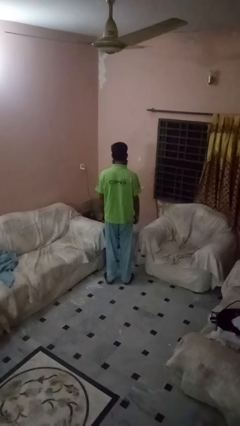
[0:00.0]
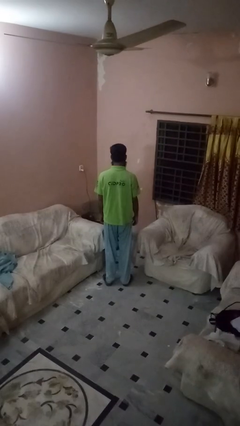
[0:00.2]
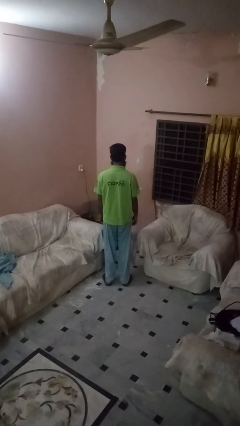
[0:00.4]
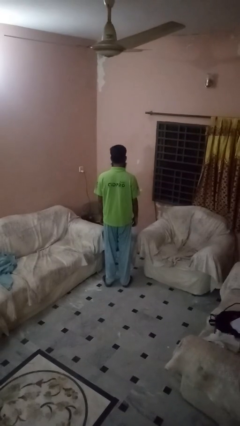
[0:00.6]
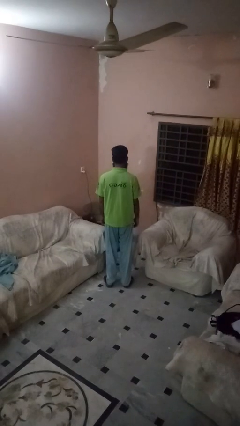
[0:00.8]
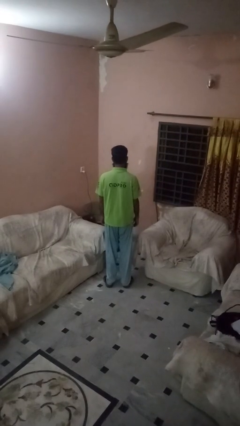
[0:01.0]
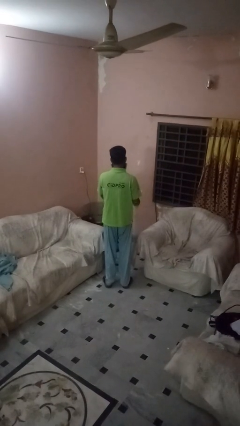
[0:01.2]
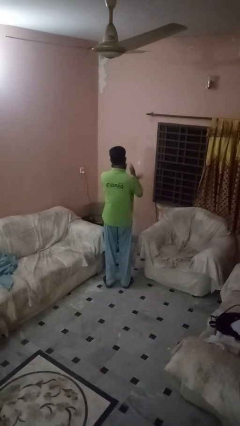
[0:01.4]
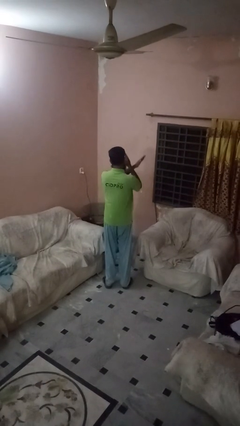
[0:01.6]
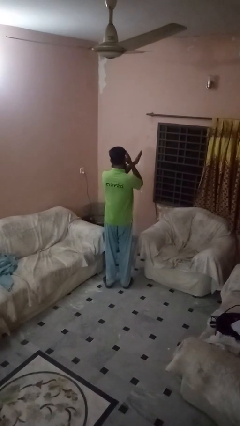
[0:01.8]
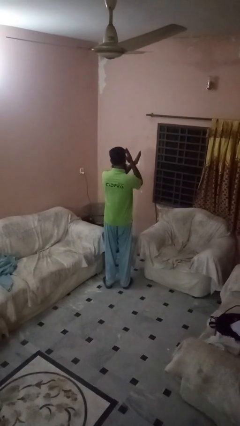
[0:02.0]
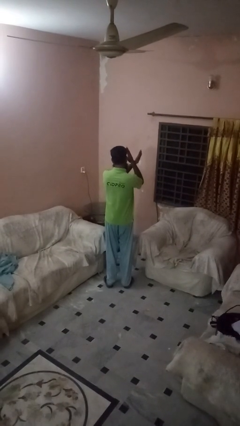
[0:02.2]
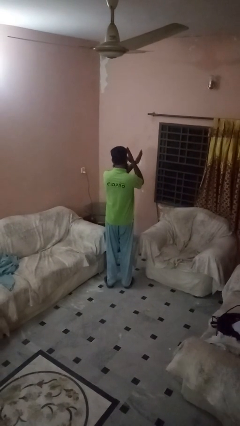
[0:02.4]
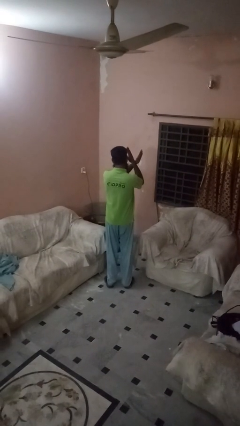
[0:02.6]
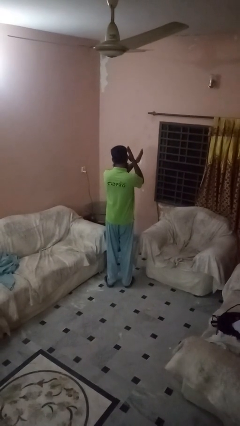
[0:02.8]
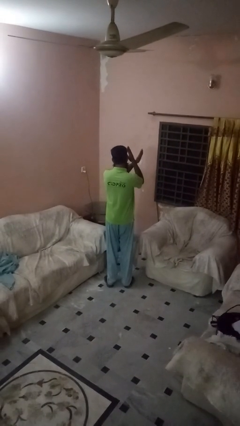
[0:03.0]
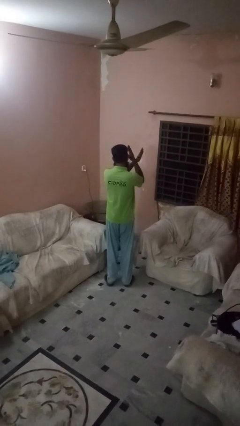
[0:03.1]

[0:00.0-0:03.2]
person gestures arms x

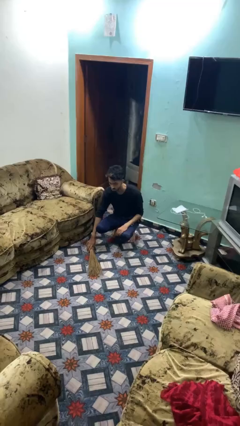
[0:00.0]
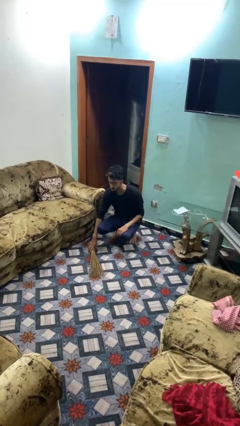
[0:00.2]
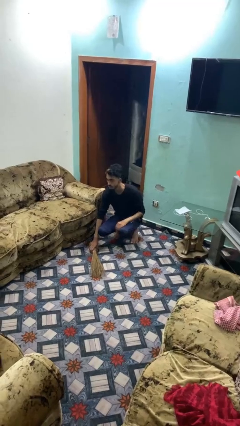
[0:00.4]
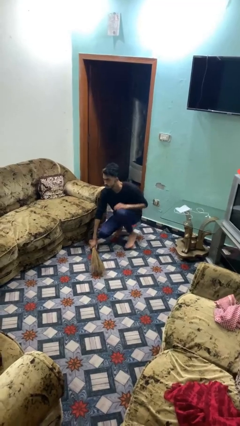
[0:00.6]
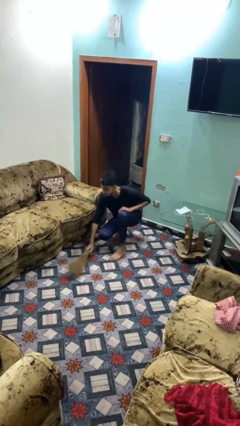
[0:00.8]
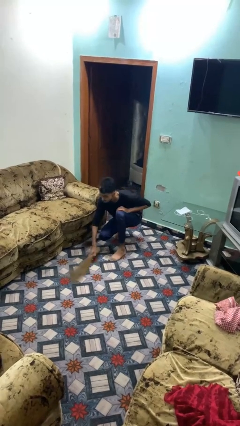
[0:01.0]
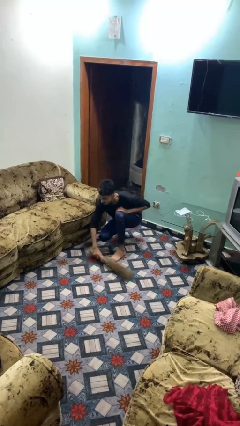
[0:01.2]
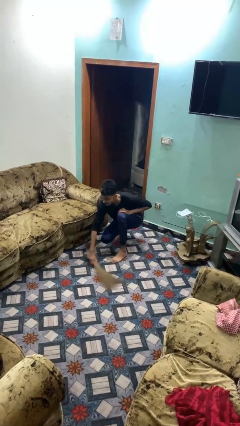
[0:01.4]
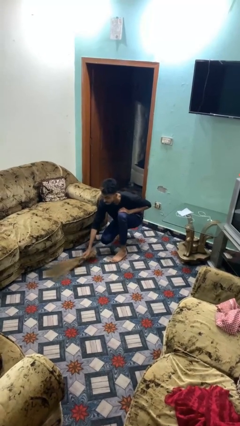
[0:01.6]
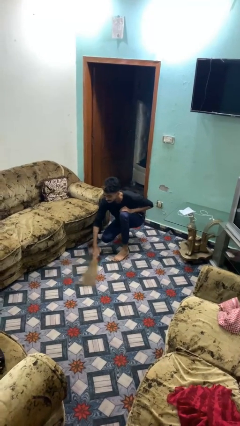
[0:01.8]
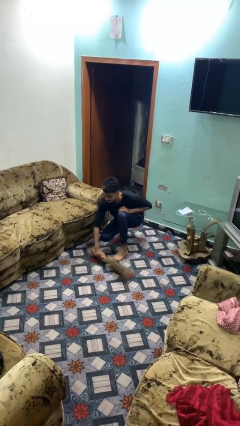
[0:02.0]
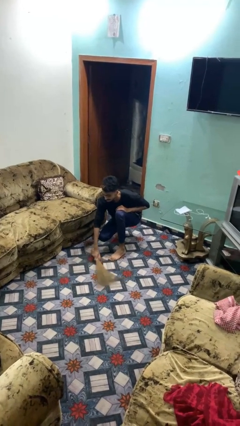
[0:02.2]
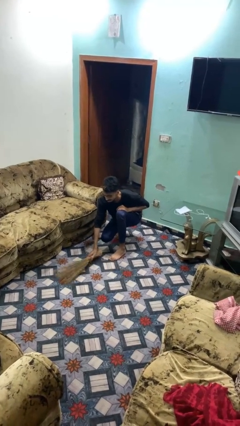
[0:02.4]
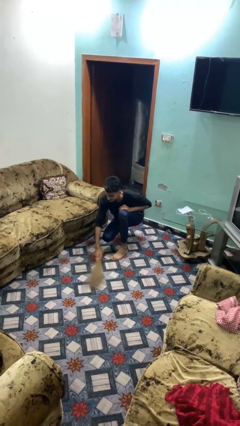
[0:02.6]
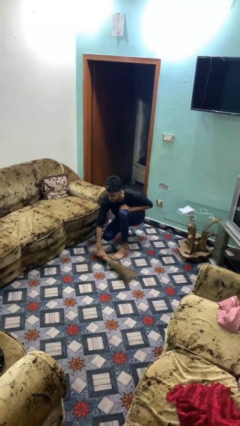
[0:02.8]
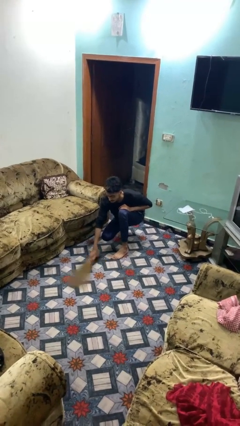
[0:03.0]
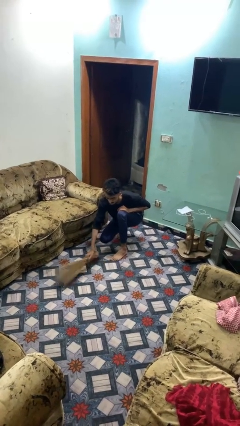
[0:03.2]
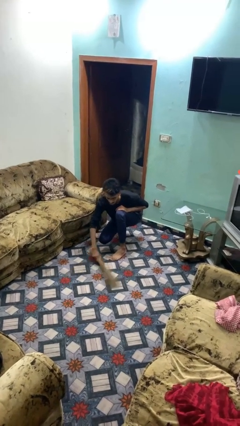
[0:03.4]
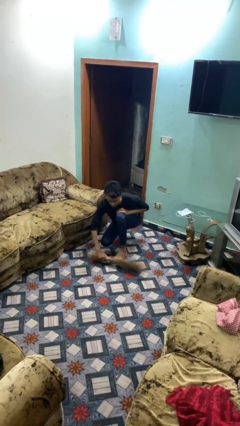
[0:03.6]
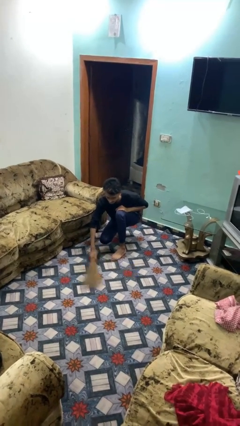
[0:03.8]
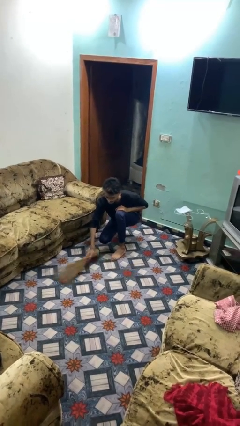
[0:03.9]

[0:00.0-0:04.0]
person sweeps floor

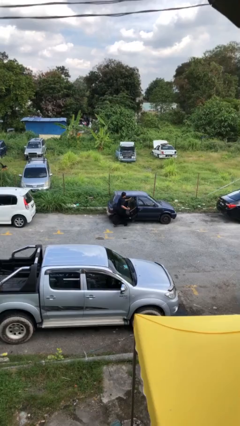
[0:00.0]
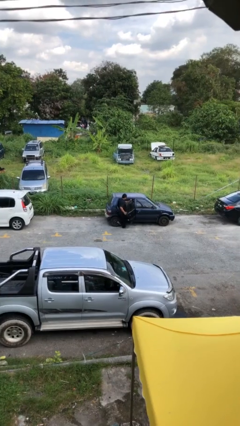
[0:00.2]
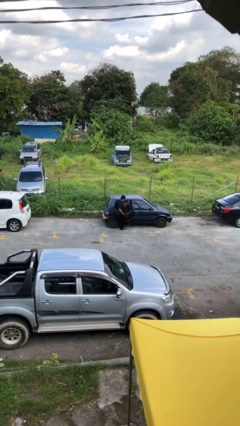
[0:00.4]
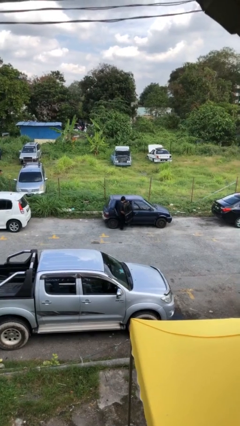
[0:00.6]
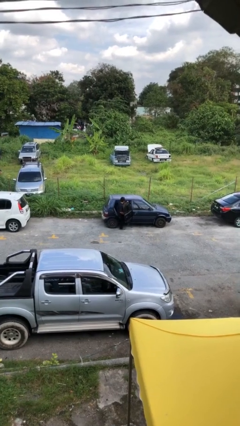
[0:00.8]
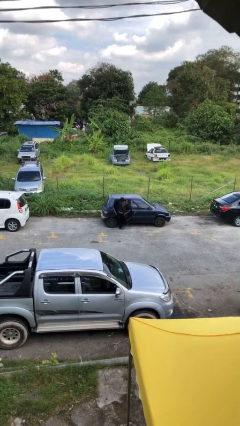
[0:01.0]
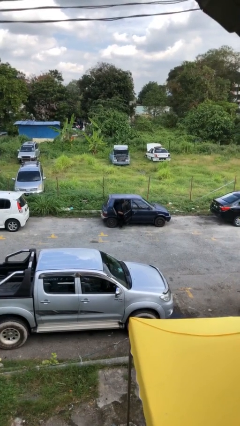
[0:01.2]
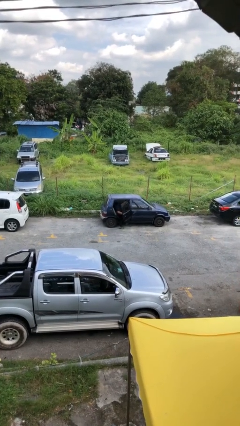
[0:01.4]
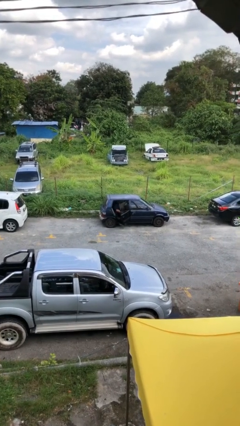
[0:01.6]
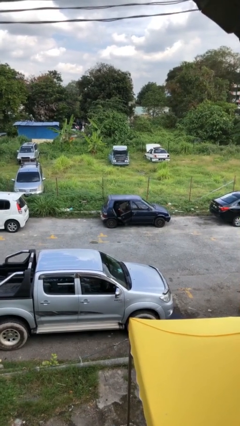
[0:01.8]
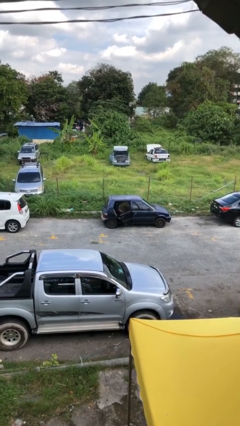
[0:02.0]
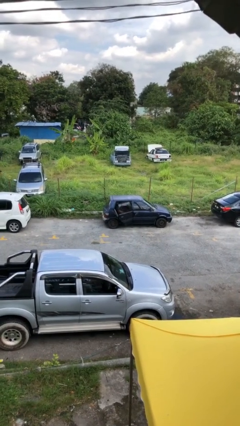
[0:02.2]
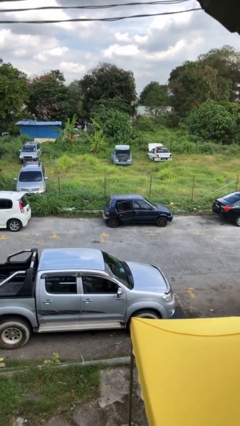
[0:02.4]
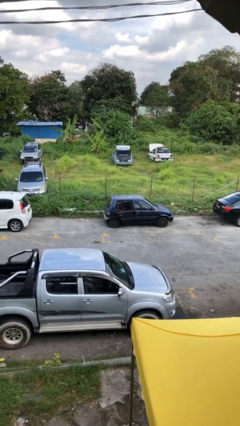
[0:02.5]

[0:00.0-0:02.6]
person enters car

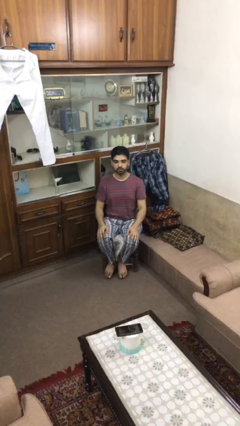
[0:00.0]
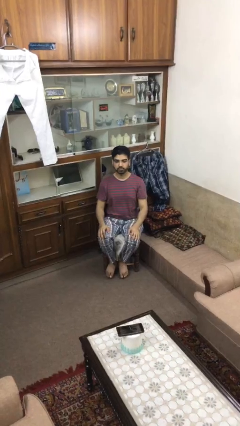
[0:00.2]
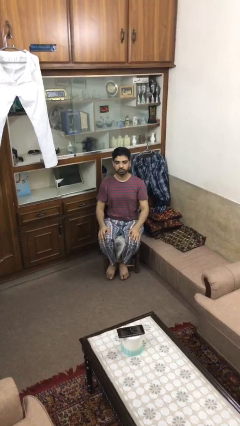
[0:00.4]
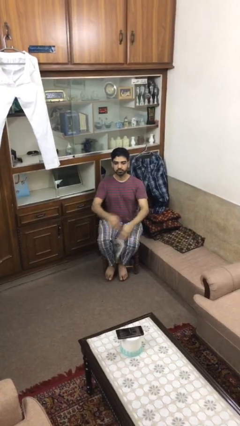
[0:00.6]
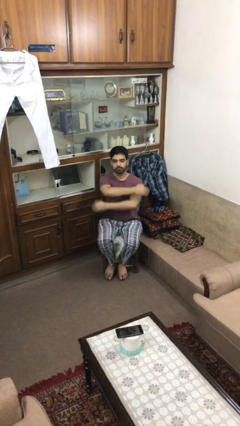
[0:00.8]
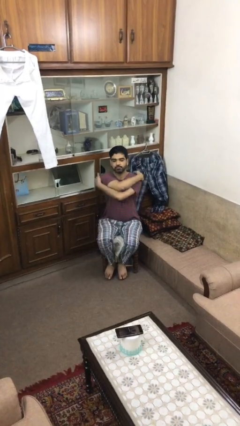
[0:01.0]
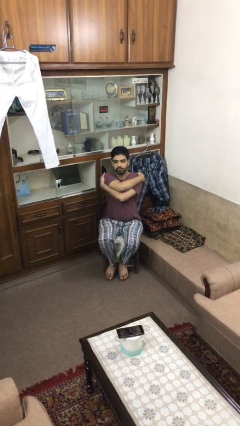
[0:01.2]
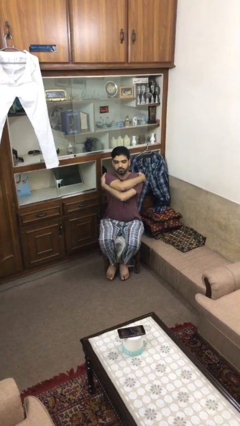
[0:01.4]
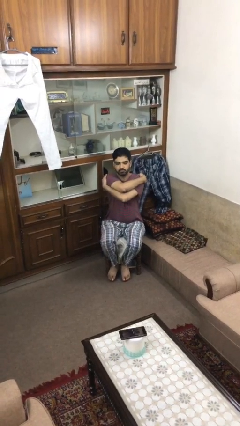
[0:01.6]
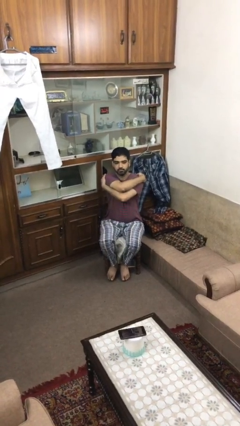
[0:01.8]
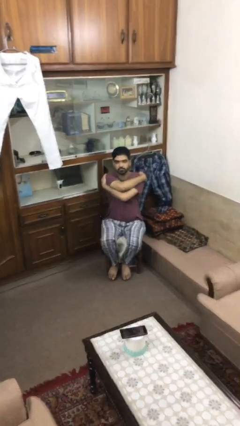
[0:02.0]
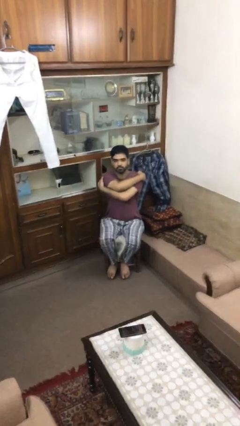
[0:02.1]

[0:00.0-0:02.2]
person crosses arms

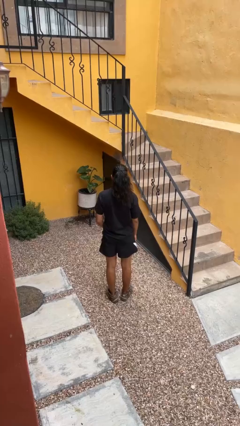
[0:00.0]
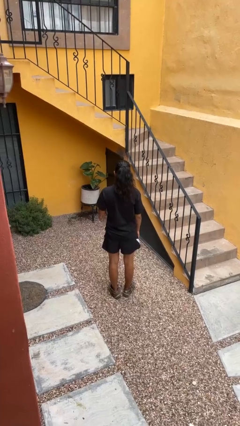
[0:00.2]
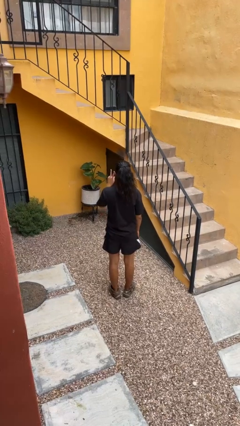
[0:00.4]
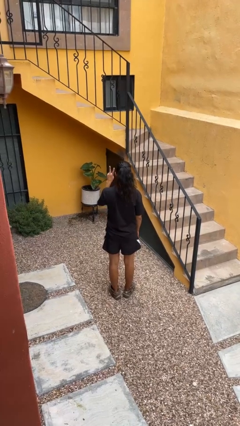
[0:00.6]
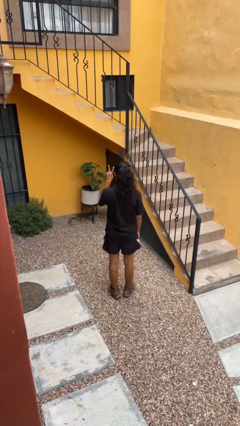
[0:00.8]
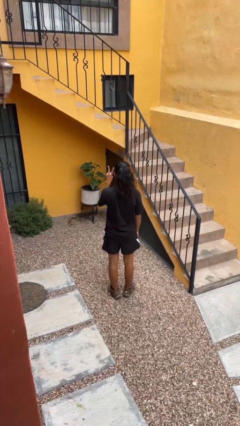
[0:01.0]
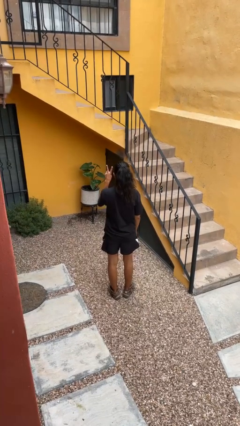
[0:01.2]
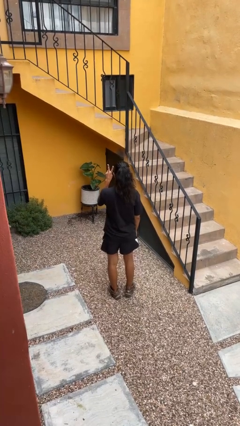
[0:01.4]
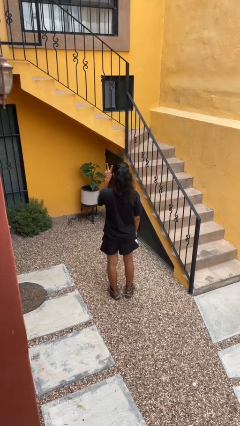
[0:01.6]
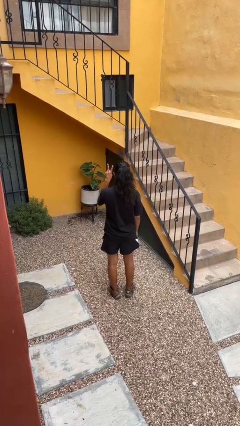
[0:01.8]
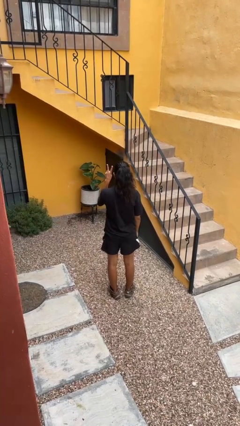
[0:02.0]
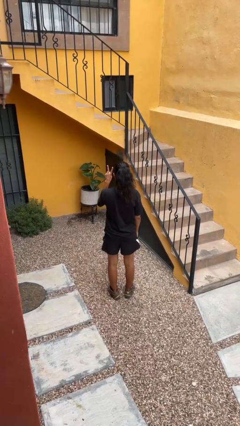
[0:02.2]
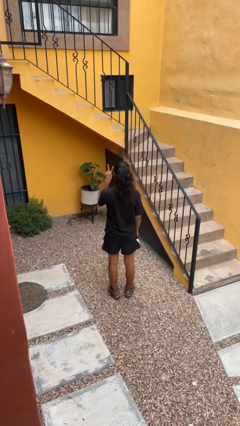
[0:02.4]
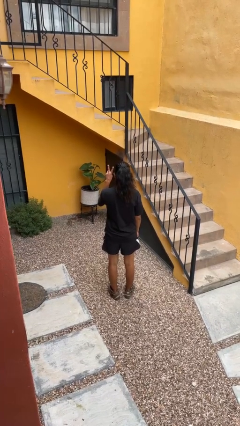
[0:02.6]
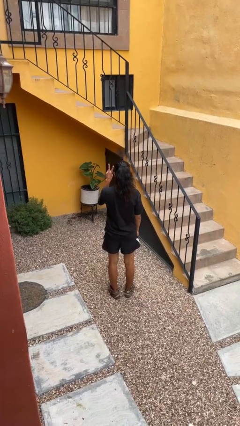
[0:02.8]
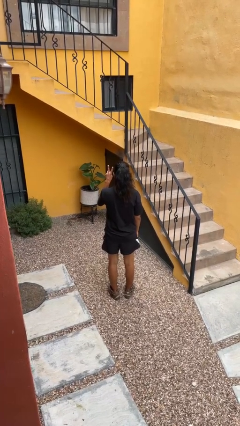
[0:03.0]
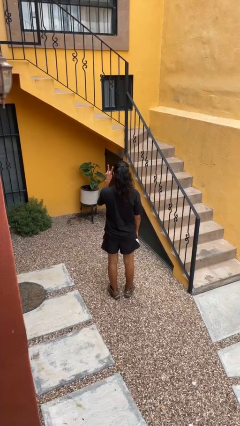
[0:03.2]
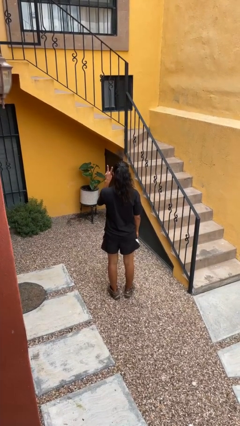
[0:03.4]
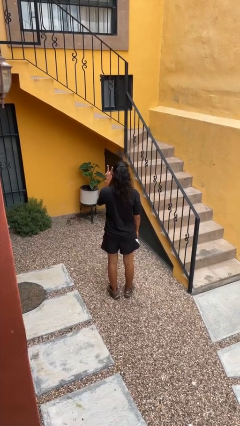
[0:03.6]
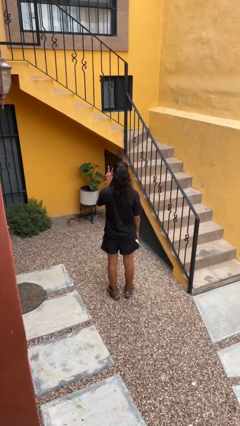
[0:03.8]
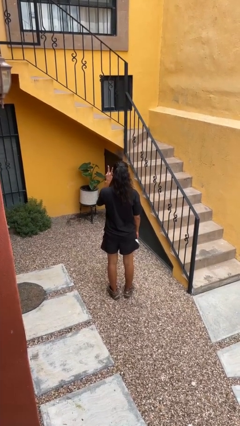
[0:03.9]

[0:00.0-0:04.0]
person gestures peace

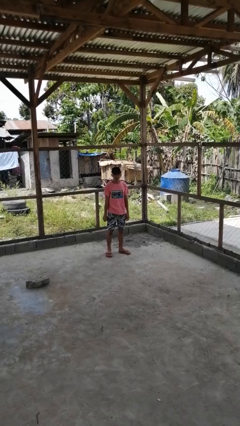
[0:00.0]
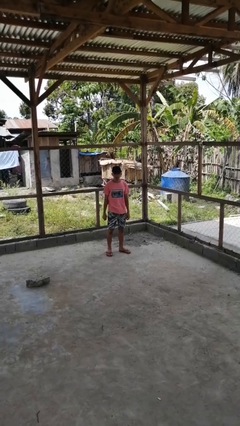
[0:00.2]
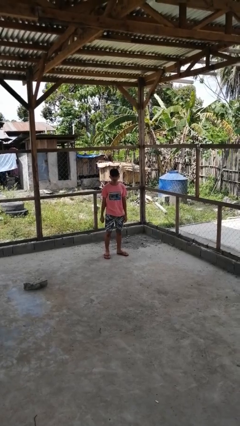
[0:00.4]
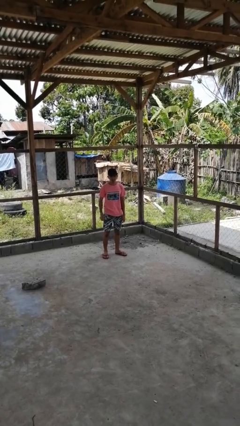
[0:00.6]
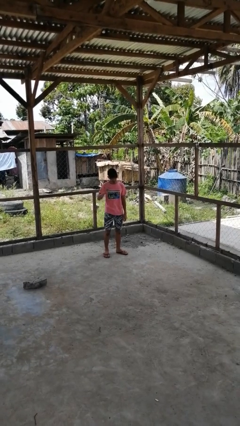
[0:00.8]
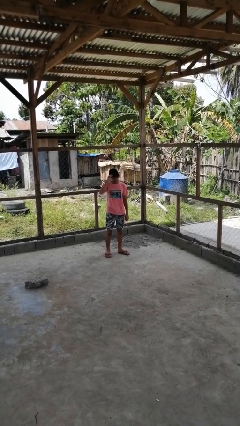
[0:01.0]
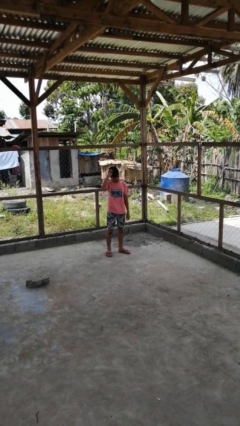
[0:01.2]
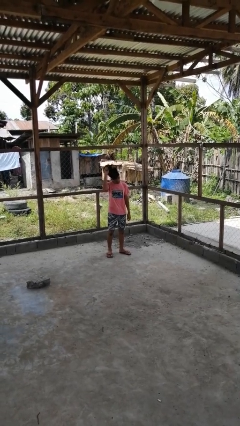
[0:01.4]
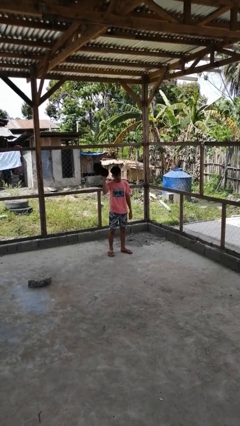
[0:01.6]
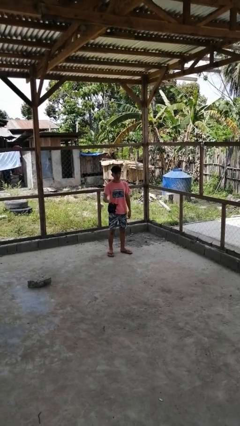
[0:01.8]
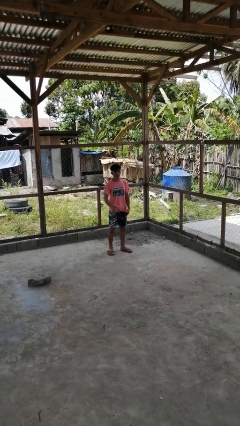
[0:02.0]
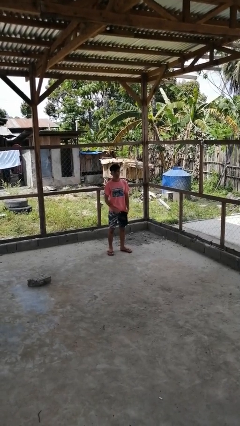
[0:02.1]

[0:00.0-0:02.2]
person takes off hat
